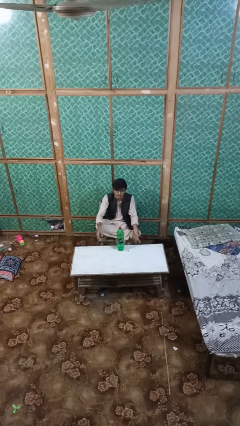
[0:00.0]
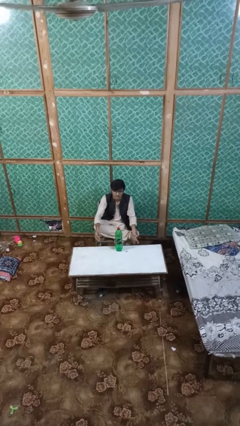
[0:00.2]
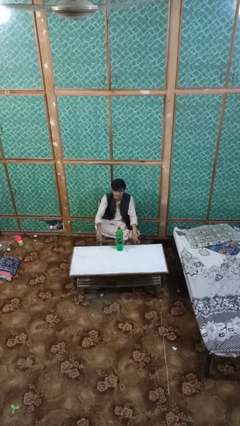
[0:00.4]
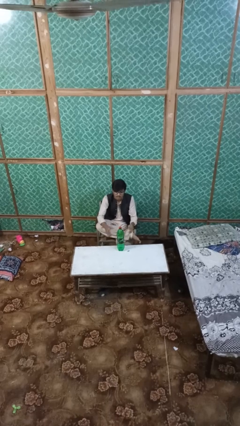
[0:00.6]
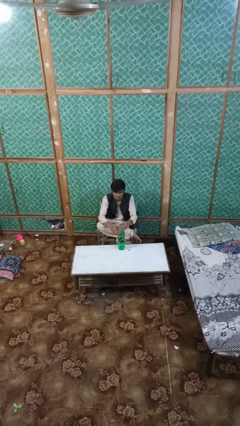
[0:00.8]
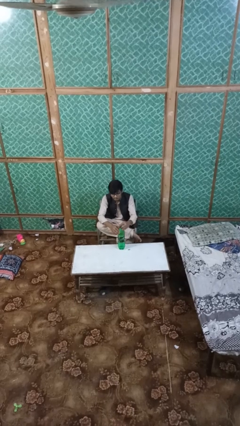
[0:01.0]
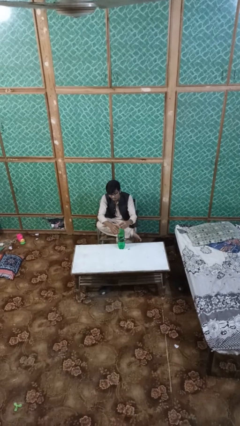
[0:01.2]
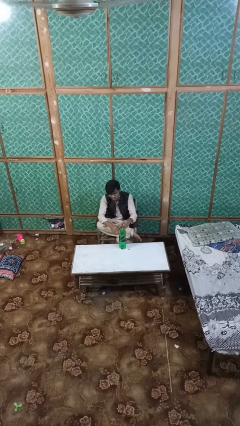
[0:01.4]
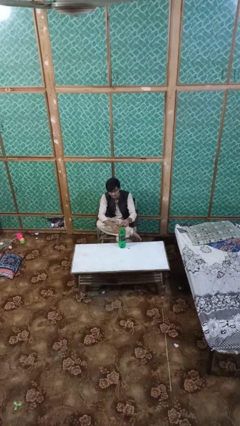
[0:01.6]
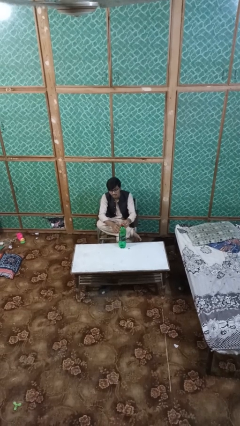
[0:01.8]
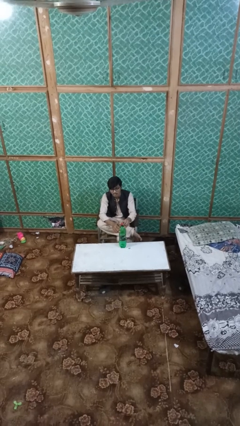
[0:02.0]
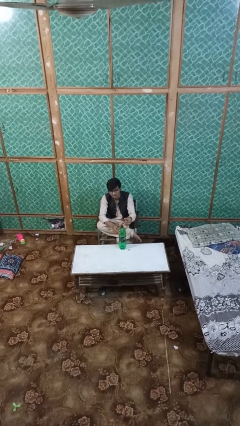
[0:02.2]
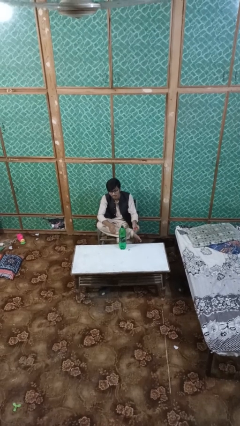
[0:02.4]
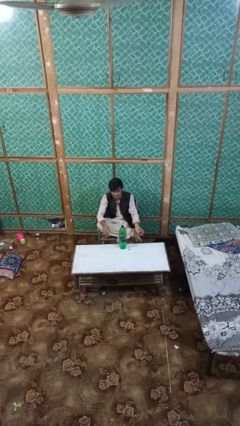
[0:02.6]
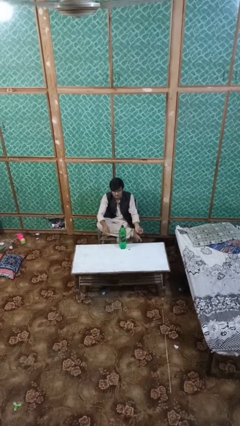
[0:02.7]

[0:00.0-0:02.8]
person unscrews lid from bottle

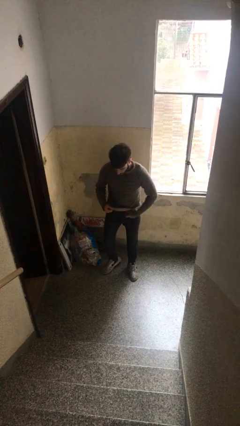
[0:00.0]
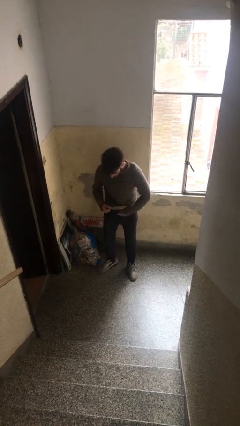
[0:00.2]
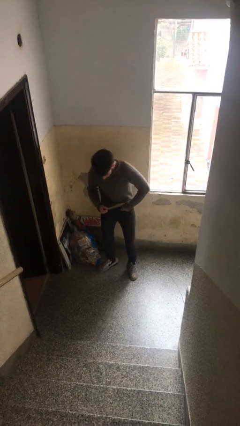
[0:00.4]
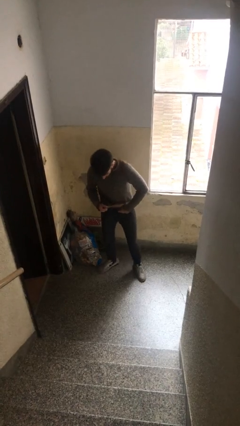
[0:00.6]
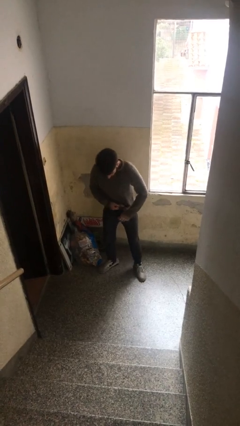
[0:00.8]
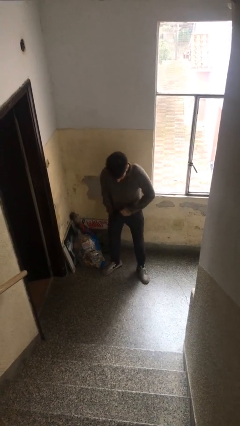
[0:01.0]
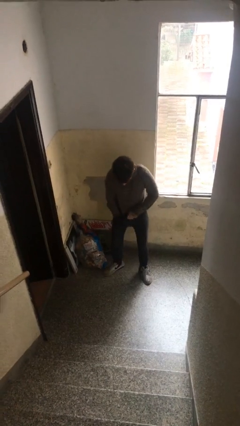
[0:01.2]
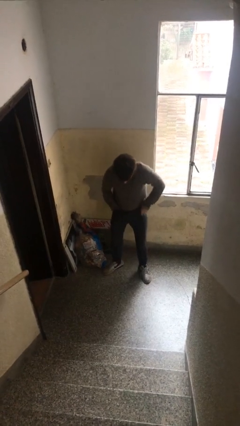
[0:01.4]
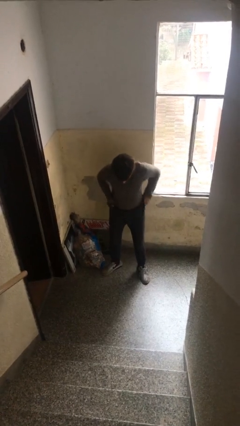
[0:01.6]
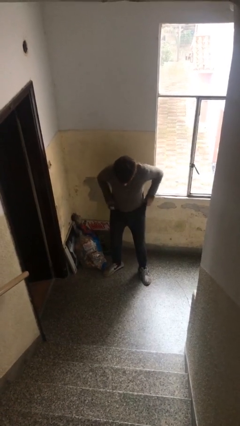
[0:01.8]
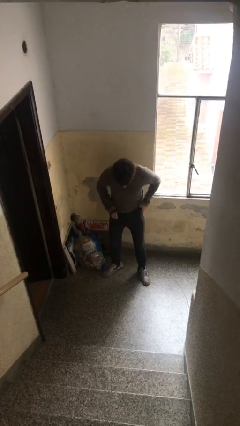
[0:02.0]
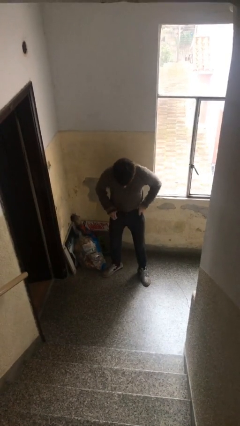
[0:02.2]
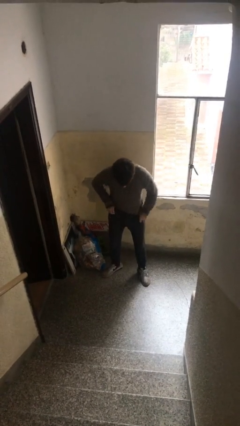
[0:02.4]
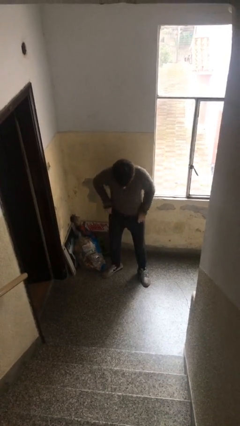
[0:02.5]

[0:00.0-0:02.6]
person tucks in shirt

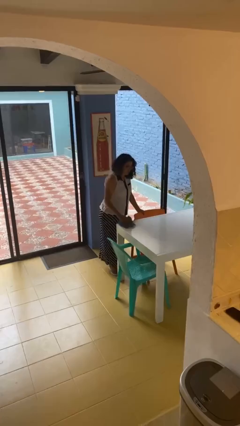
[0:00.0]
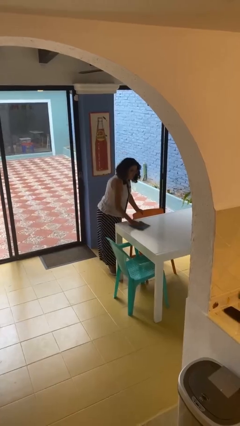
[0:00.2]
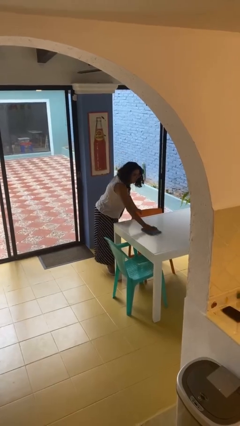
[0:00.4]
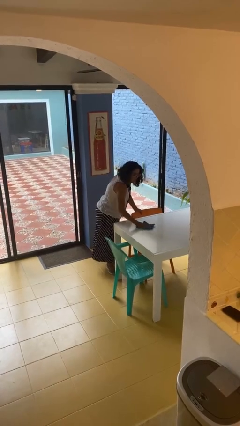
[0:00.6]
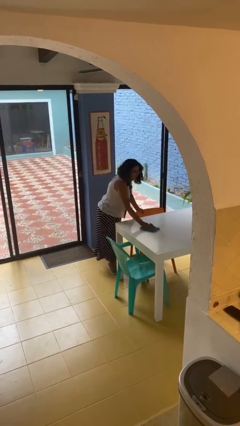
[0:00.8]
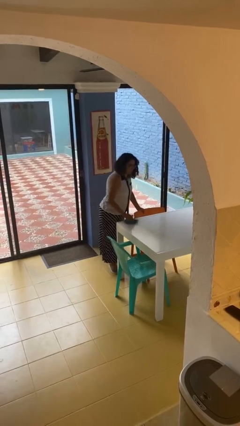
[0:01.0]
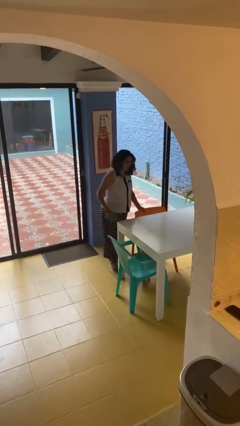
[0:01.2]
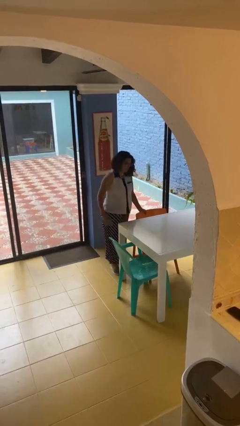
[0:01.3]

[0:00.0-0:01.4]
person cleans table with rag

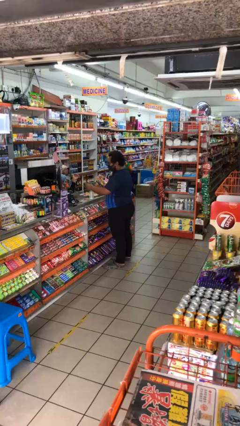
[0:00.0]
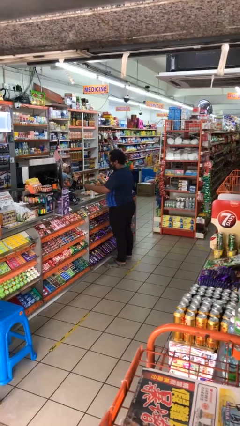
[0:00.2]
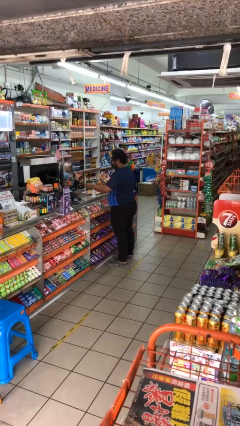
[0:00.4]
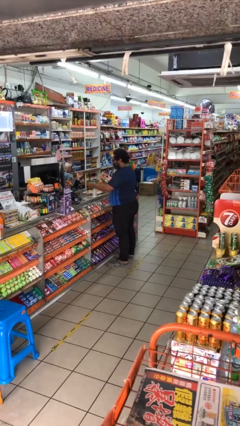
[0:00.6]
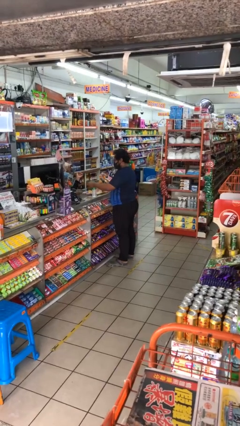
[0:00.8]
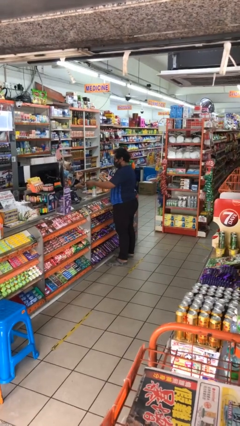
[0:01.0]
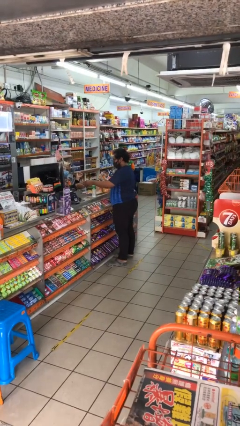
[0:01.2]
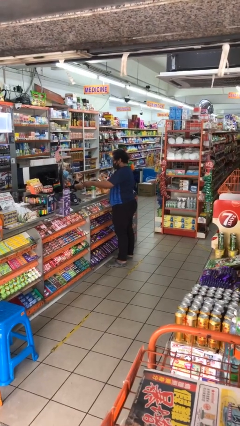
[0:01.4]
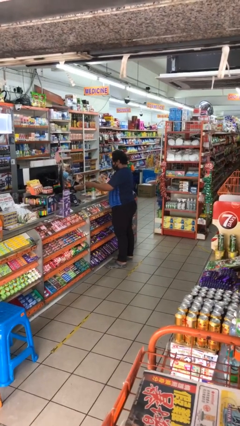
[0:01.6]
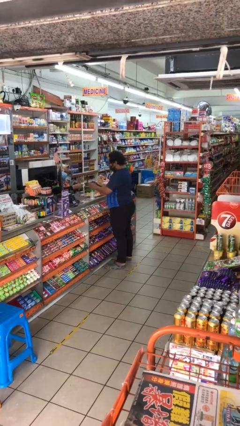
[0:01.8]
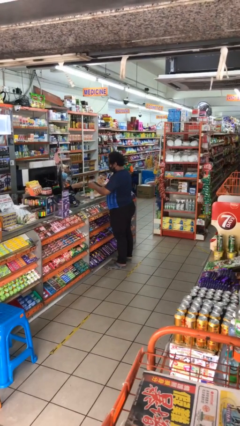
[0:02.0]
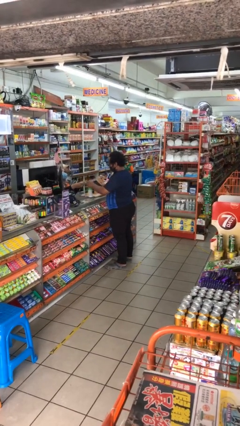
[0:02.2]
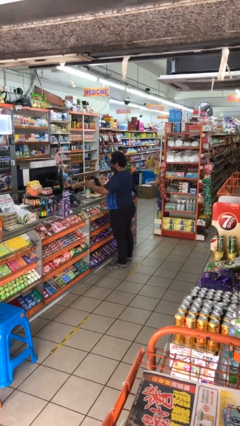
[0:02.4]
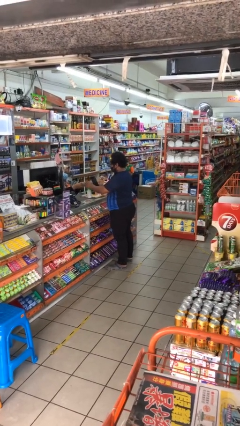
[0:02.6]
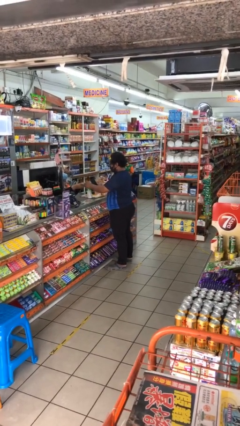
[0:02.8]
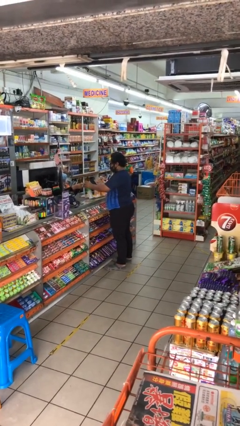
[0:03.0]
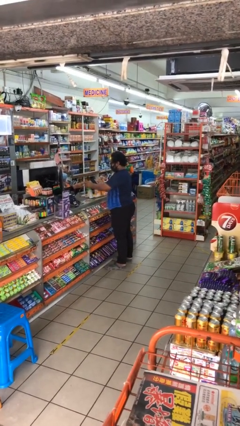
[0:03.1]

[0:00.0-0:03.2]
person purchases from machine

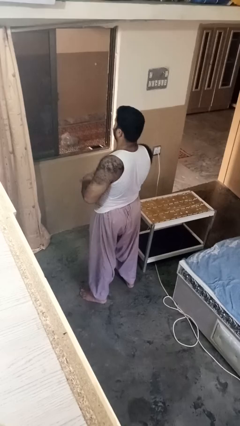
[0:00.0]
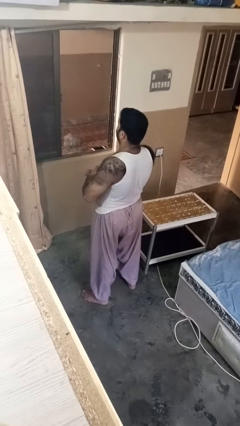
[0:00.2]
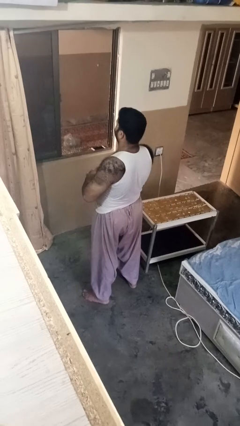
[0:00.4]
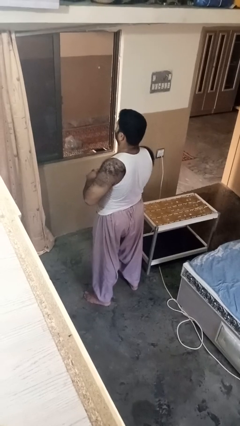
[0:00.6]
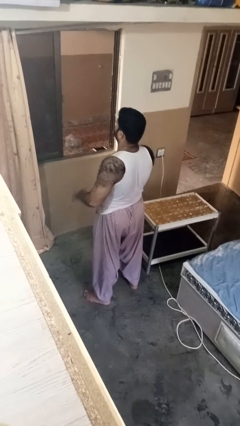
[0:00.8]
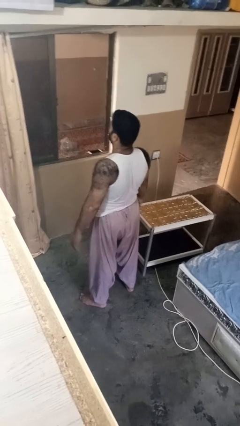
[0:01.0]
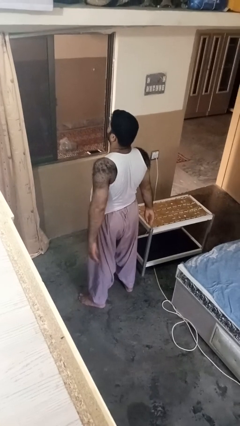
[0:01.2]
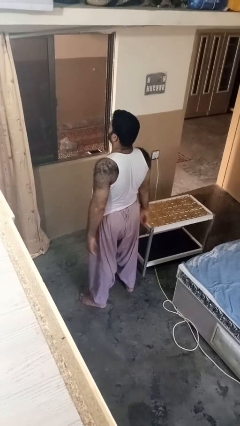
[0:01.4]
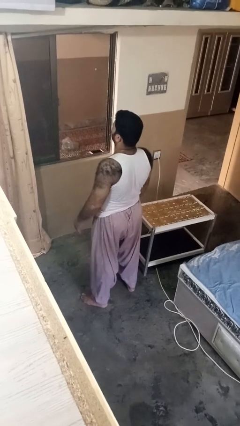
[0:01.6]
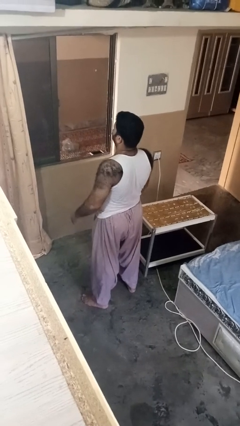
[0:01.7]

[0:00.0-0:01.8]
person takes off ring

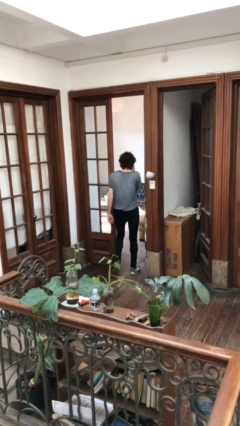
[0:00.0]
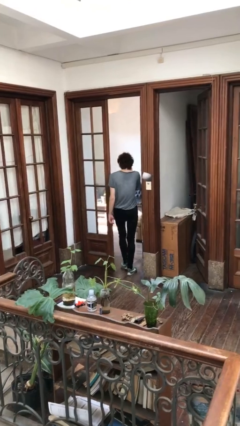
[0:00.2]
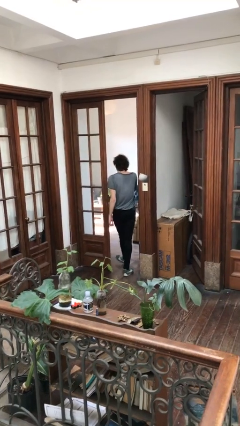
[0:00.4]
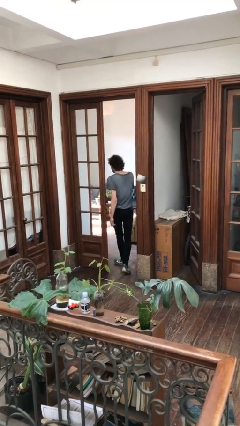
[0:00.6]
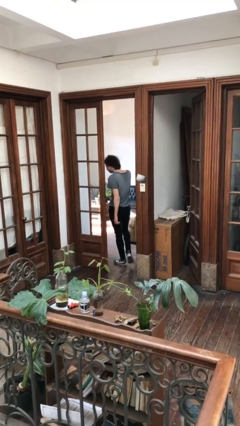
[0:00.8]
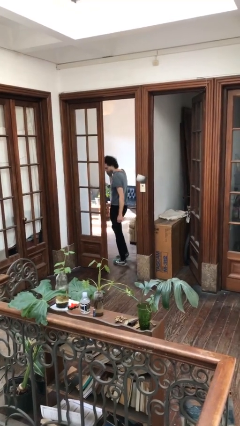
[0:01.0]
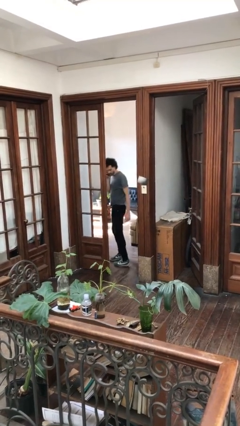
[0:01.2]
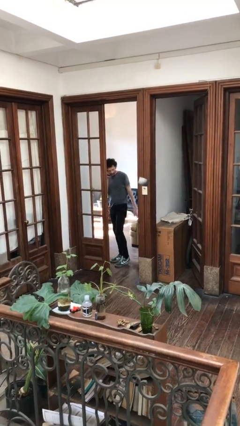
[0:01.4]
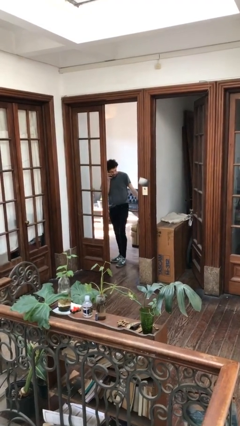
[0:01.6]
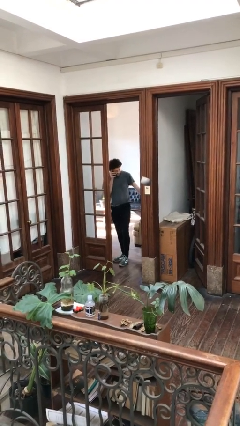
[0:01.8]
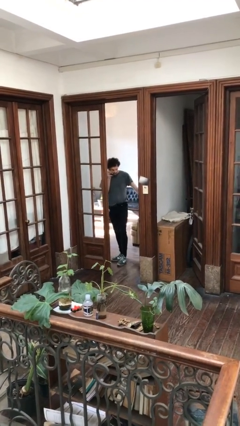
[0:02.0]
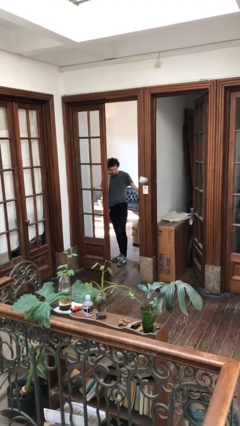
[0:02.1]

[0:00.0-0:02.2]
person exits scene through structure

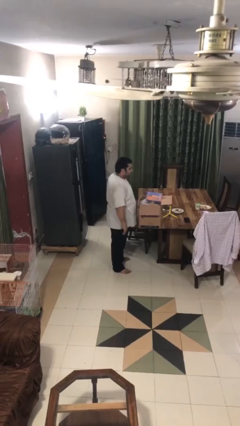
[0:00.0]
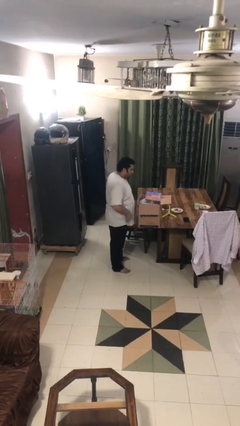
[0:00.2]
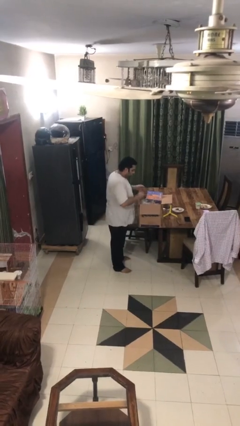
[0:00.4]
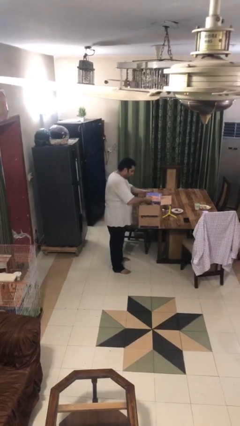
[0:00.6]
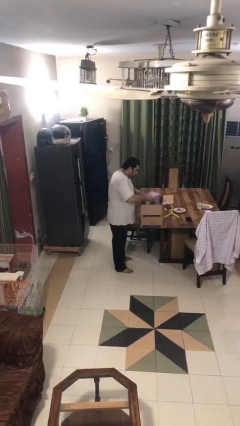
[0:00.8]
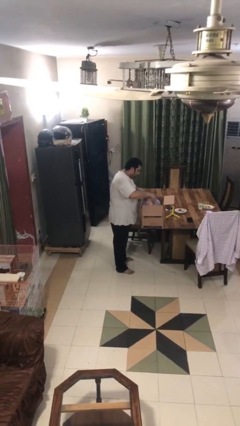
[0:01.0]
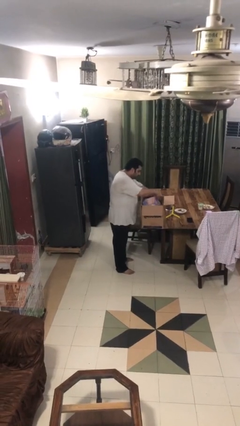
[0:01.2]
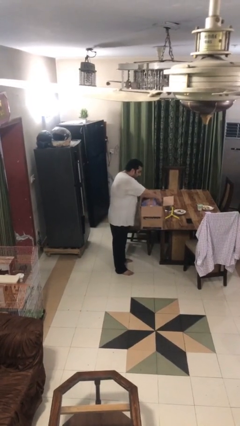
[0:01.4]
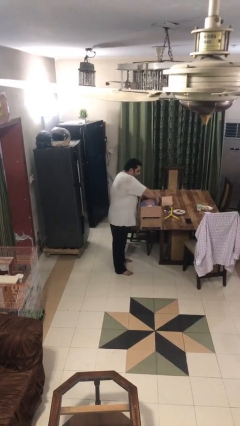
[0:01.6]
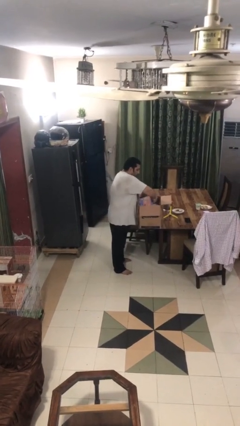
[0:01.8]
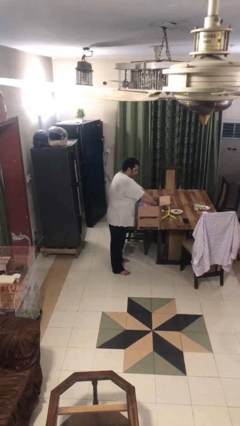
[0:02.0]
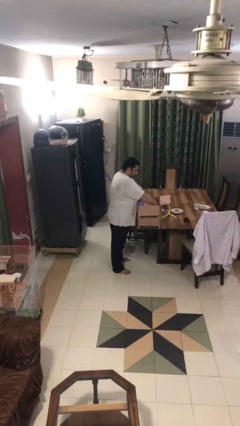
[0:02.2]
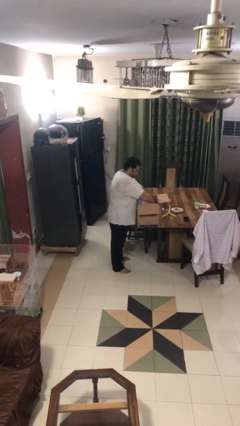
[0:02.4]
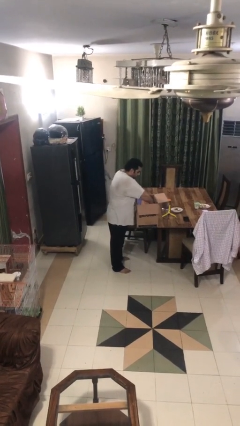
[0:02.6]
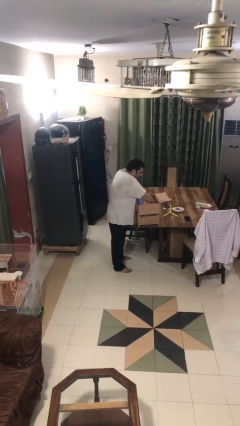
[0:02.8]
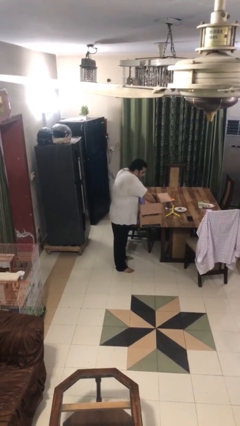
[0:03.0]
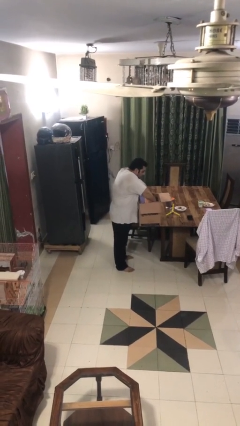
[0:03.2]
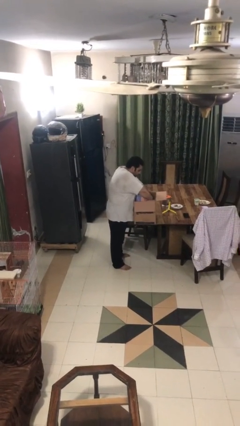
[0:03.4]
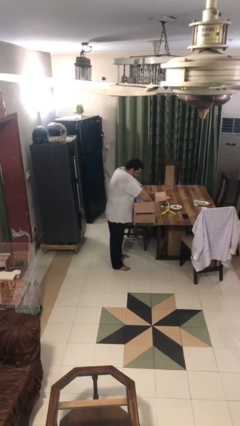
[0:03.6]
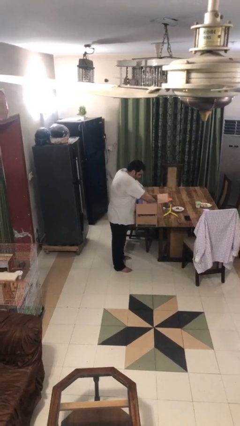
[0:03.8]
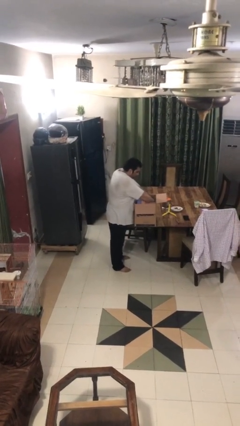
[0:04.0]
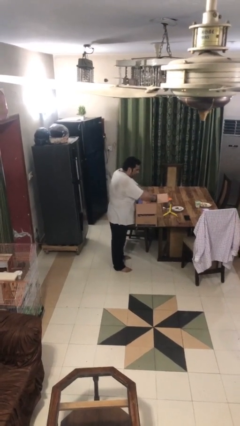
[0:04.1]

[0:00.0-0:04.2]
person searches in box
